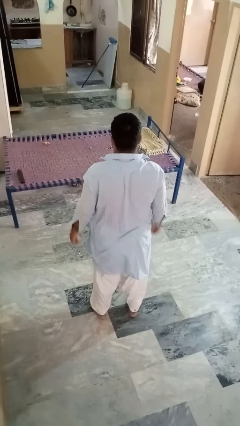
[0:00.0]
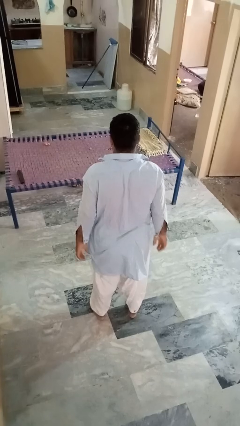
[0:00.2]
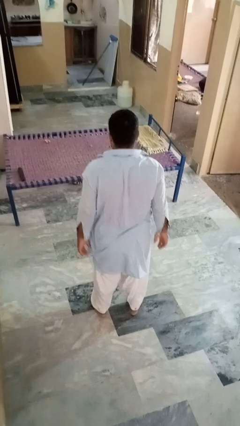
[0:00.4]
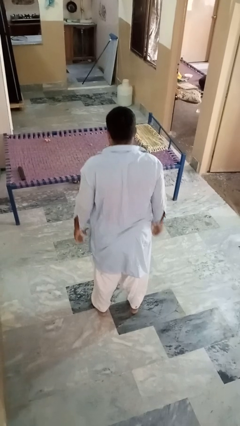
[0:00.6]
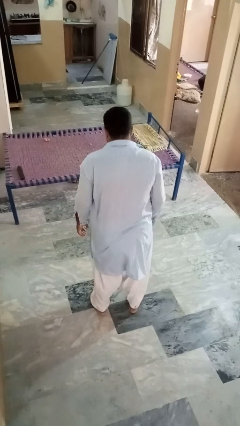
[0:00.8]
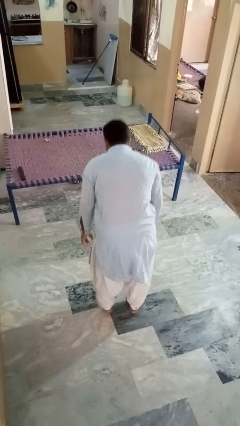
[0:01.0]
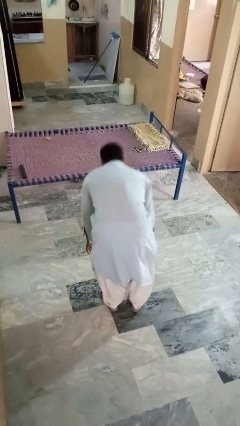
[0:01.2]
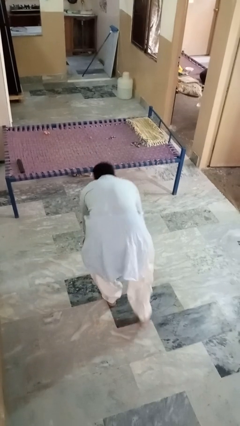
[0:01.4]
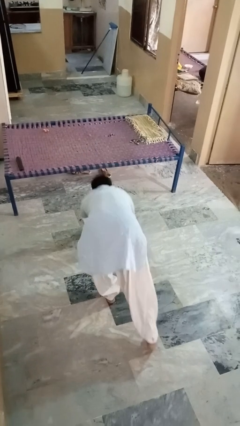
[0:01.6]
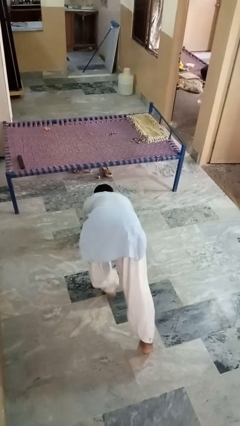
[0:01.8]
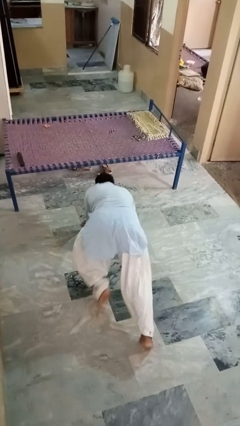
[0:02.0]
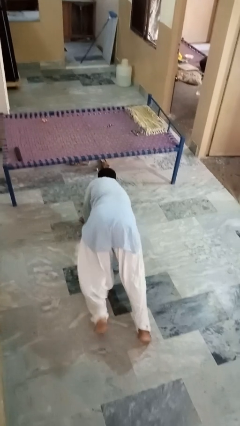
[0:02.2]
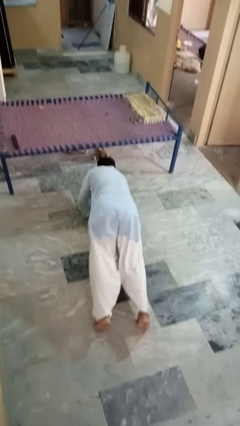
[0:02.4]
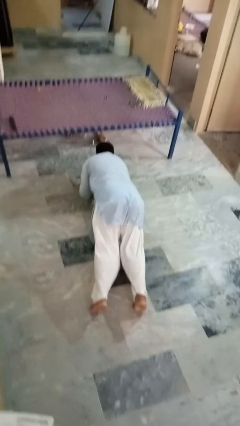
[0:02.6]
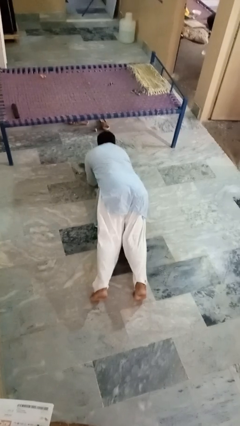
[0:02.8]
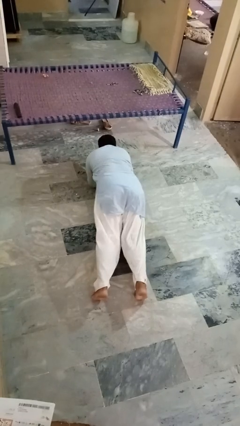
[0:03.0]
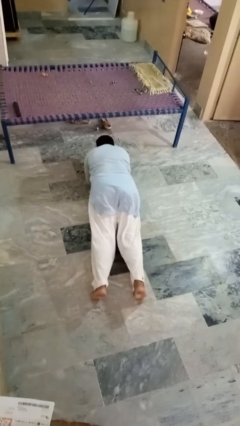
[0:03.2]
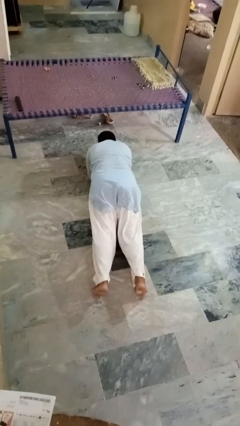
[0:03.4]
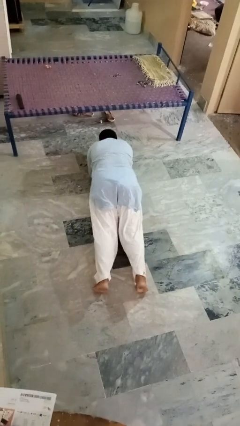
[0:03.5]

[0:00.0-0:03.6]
person exercises with plank

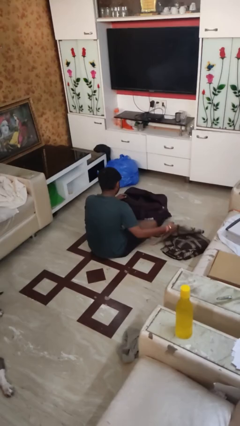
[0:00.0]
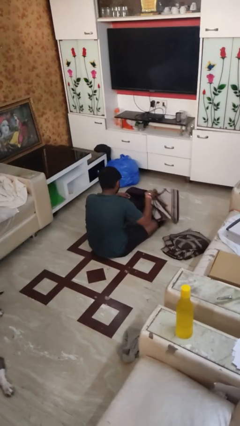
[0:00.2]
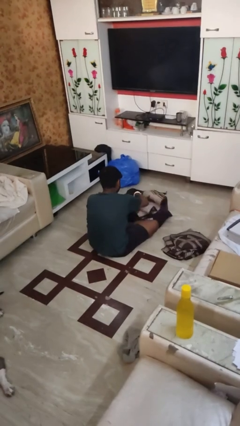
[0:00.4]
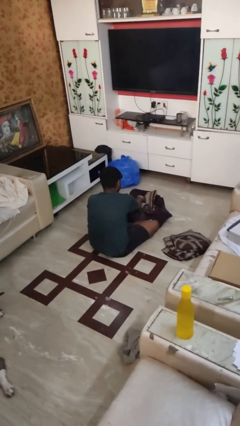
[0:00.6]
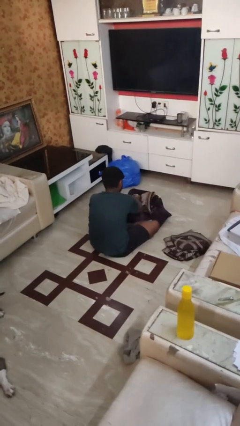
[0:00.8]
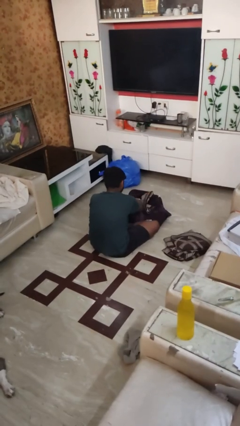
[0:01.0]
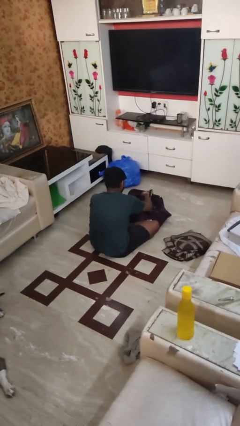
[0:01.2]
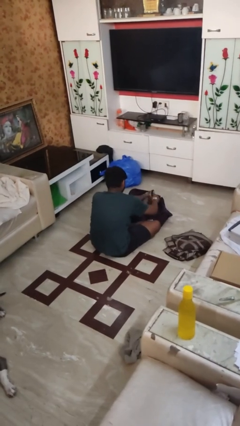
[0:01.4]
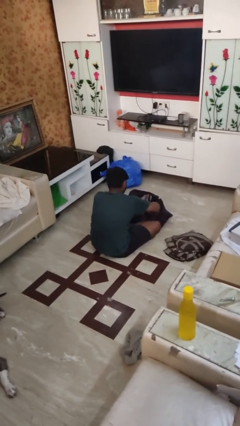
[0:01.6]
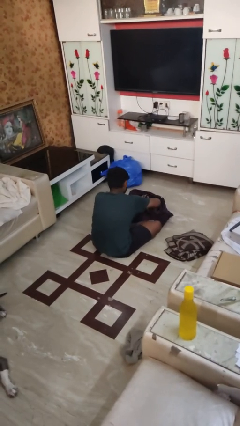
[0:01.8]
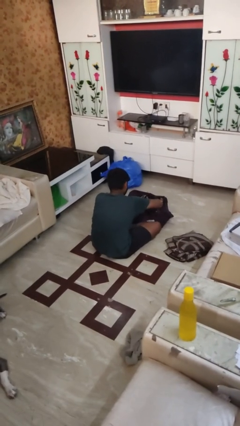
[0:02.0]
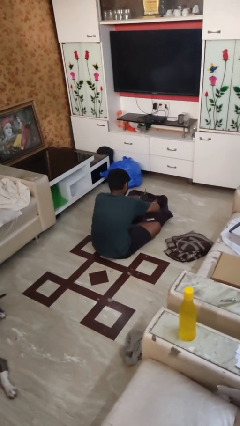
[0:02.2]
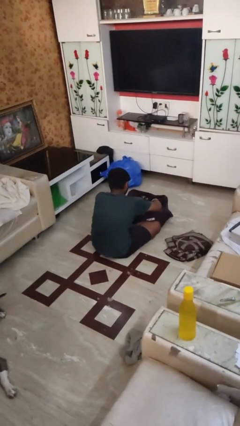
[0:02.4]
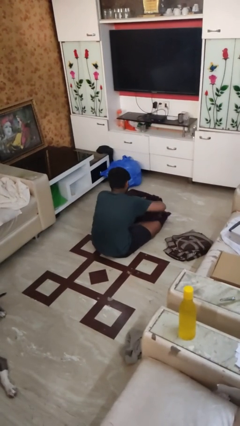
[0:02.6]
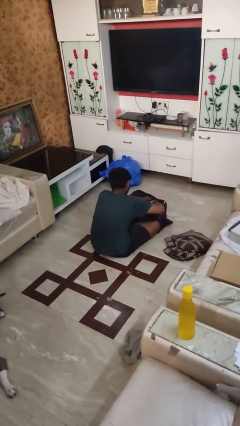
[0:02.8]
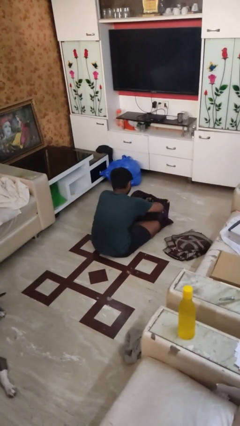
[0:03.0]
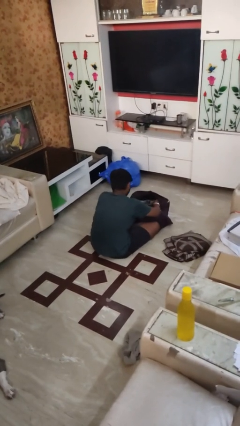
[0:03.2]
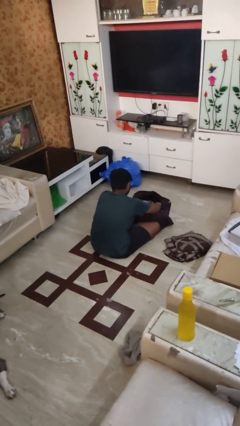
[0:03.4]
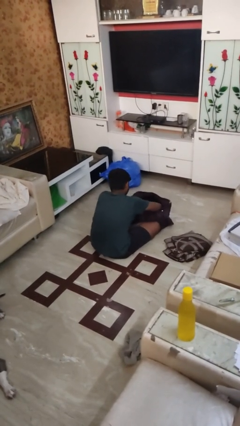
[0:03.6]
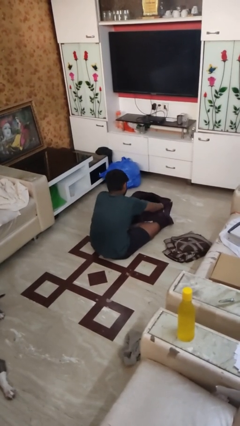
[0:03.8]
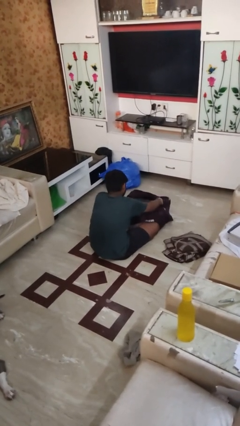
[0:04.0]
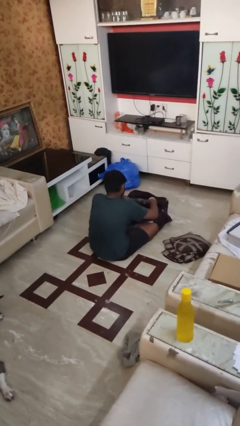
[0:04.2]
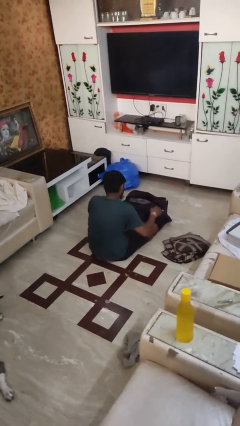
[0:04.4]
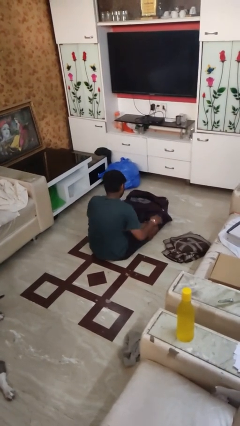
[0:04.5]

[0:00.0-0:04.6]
person loads clothes into suitcase

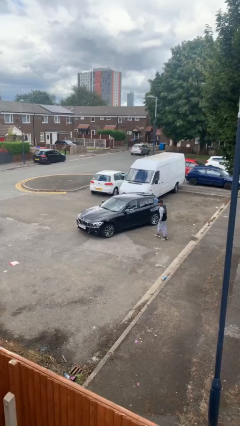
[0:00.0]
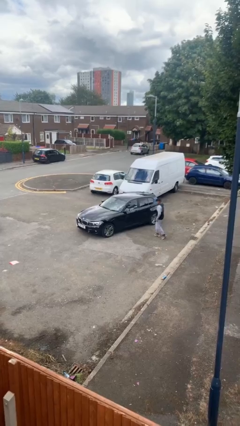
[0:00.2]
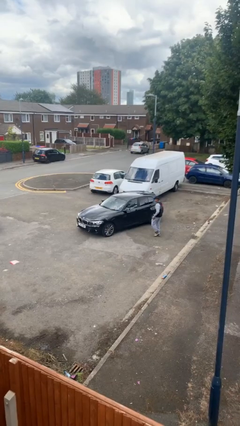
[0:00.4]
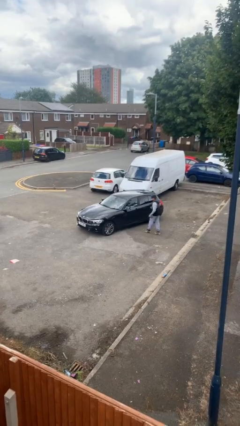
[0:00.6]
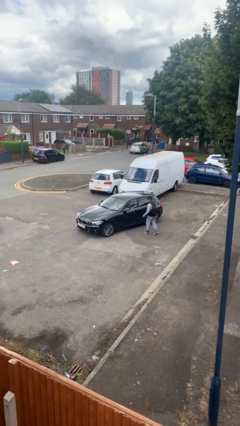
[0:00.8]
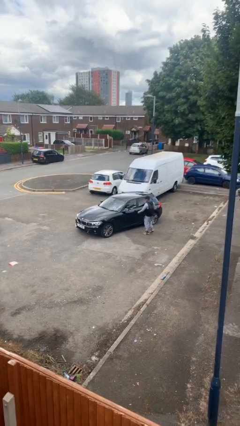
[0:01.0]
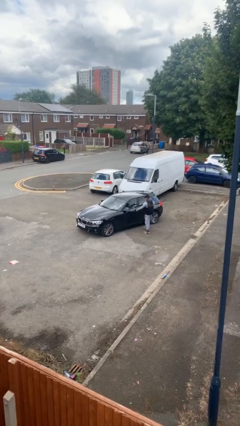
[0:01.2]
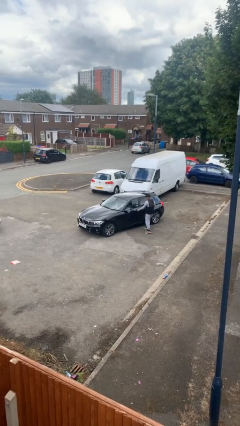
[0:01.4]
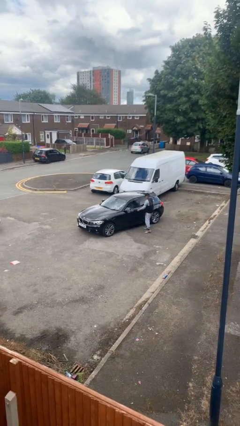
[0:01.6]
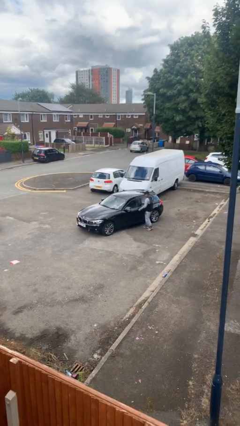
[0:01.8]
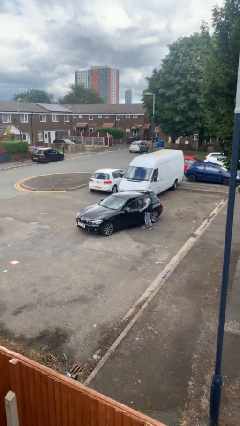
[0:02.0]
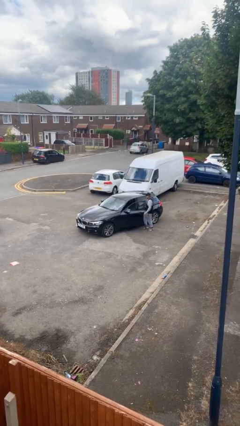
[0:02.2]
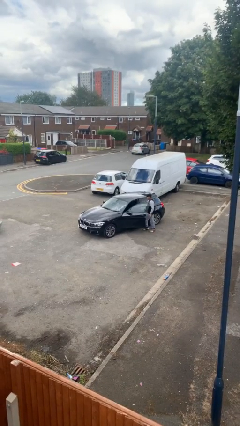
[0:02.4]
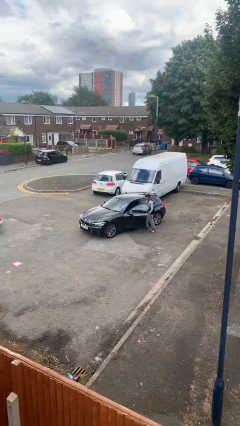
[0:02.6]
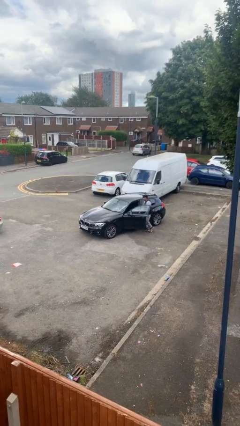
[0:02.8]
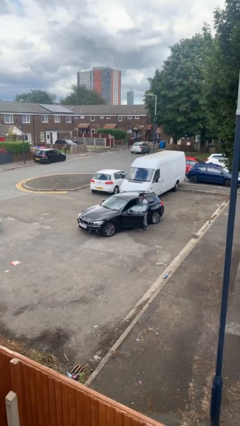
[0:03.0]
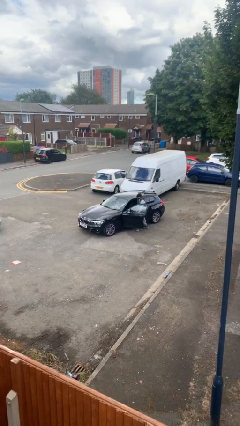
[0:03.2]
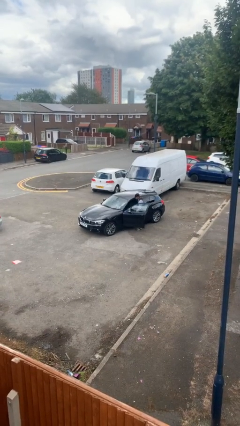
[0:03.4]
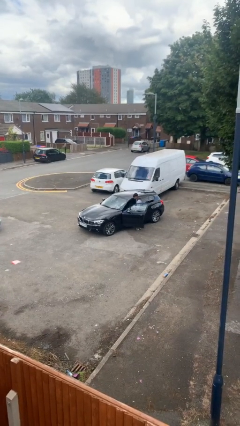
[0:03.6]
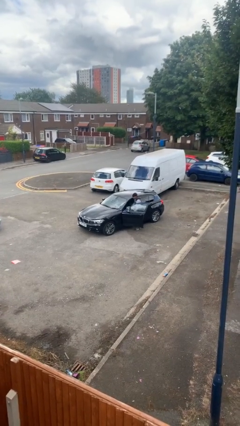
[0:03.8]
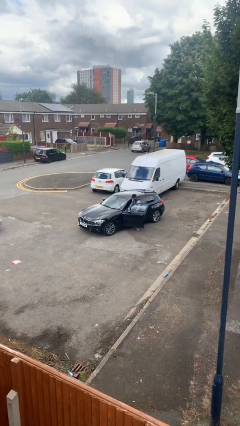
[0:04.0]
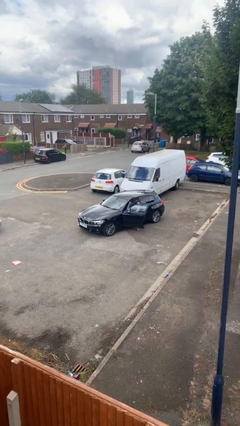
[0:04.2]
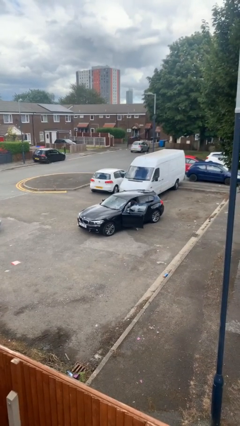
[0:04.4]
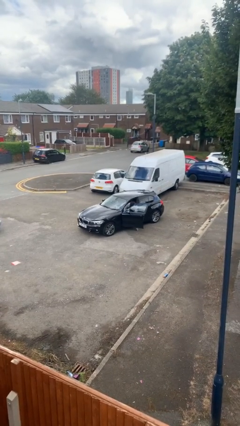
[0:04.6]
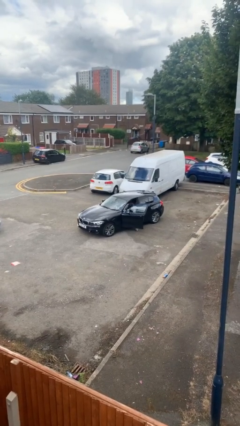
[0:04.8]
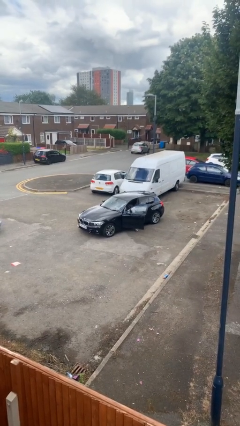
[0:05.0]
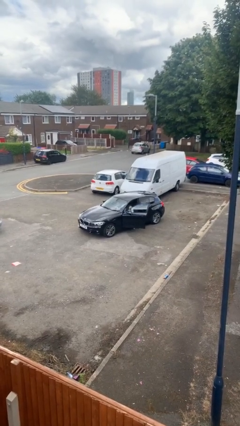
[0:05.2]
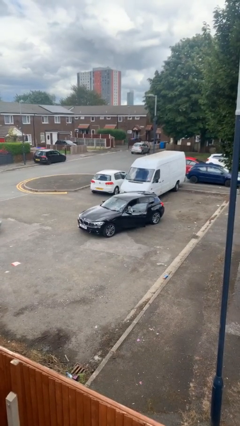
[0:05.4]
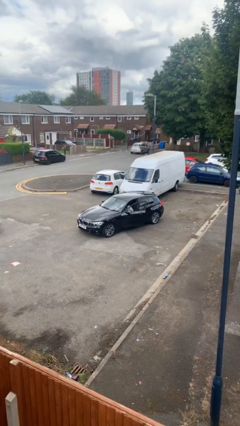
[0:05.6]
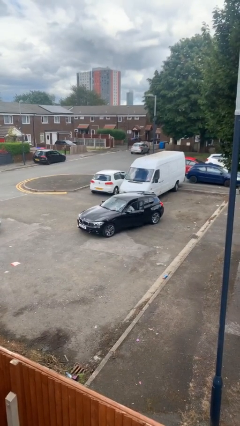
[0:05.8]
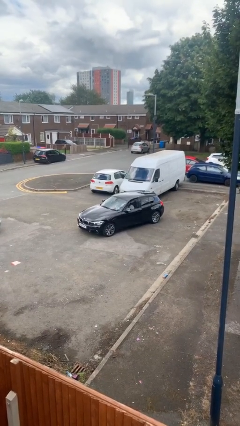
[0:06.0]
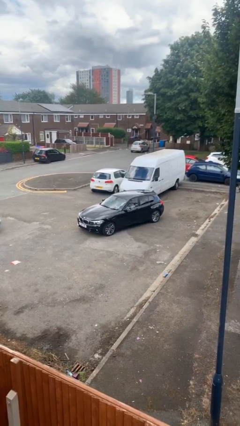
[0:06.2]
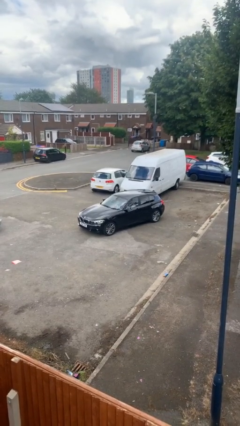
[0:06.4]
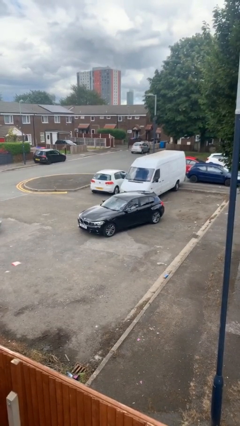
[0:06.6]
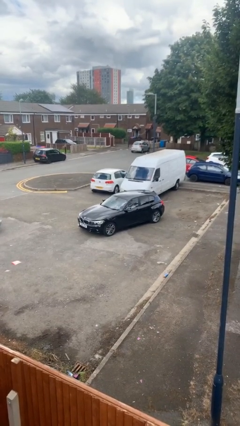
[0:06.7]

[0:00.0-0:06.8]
car picks up person

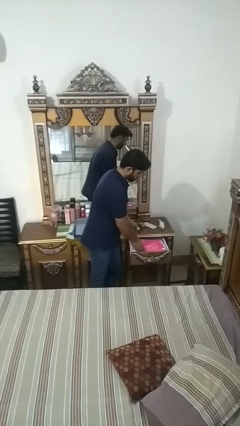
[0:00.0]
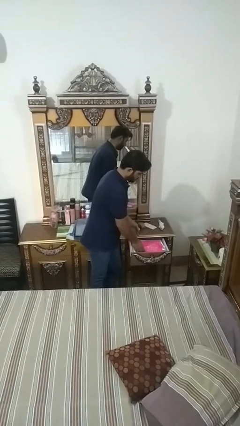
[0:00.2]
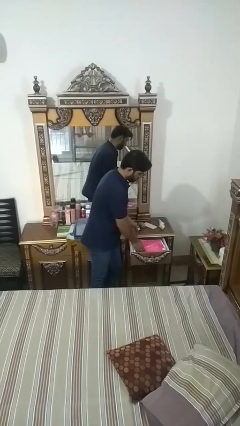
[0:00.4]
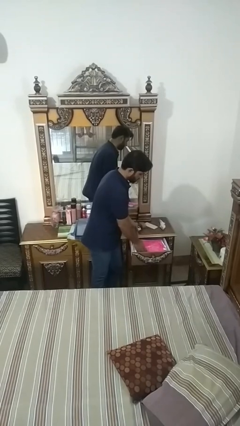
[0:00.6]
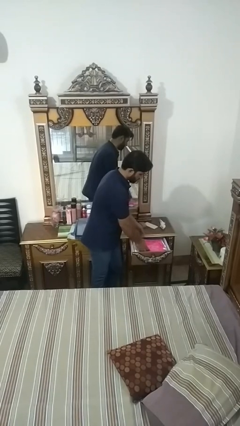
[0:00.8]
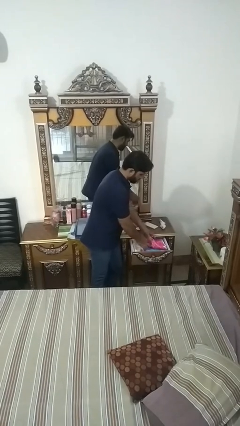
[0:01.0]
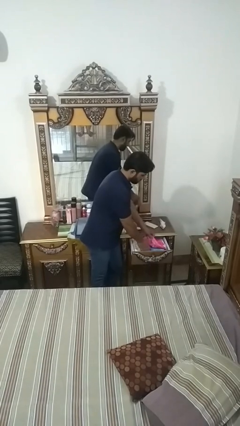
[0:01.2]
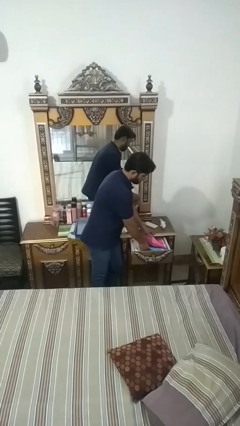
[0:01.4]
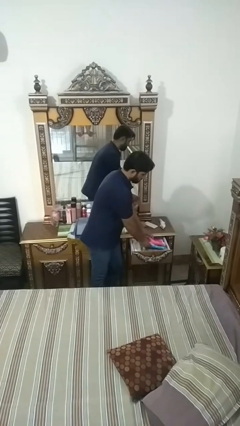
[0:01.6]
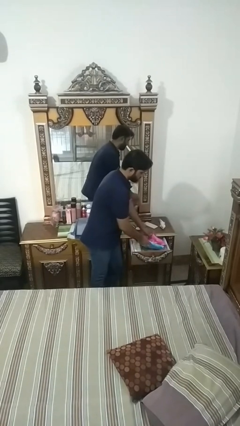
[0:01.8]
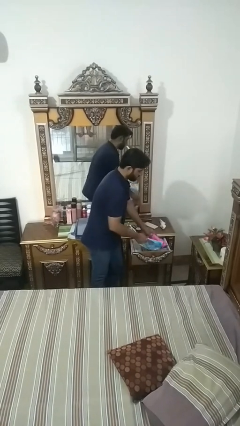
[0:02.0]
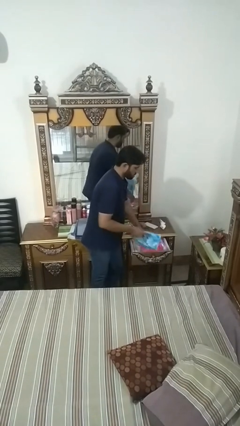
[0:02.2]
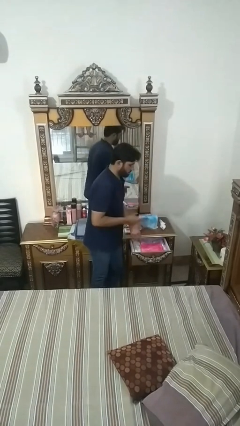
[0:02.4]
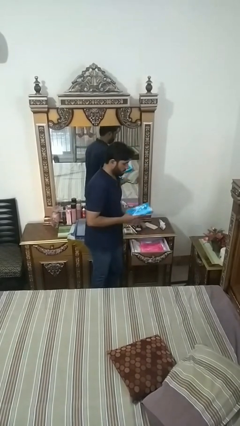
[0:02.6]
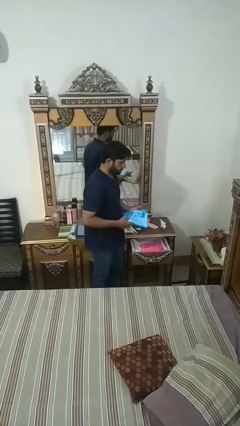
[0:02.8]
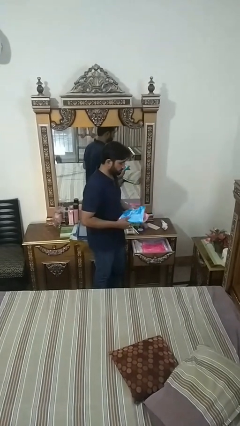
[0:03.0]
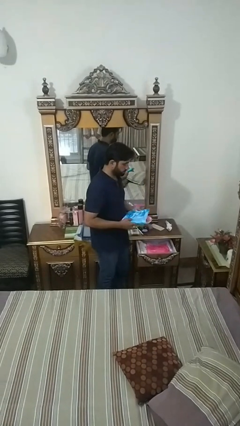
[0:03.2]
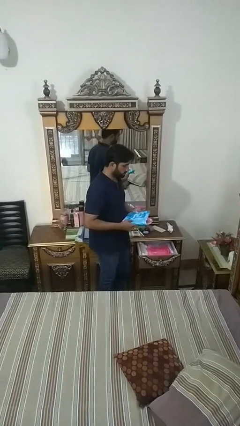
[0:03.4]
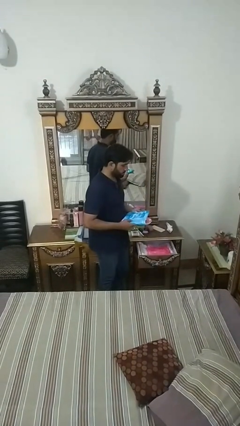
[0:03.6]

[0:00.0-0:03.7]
person takes clothes from dresser
